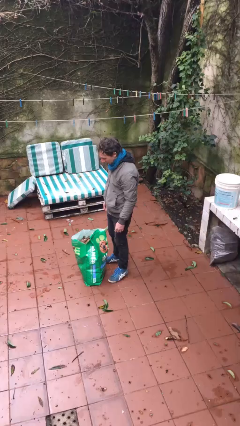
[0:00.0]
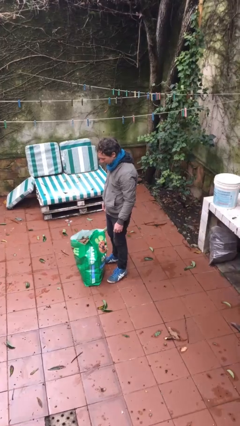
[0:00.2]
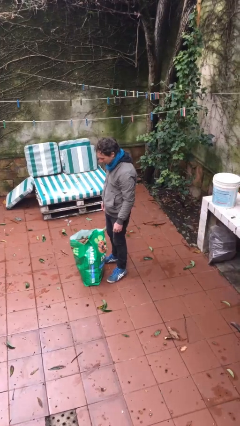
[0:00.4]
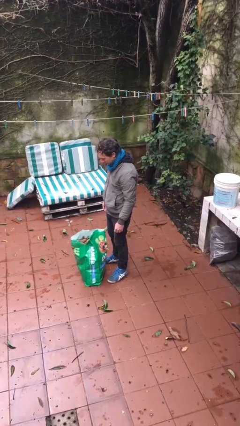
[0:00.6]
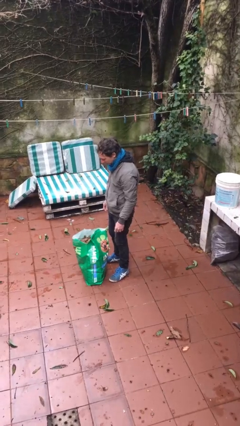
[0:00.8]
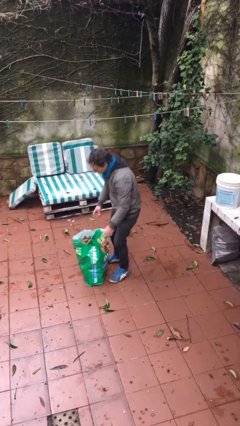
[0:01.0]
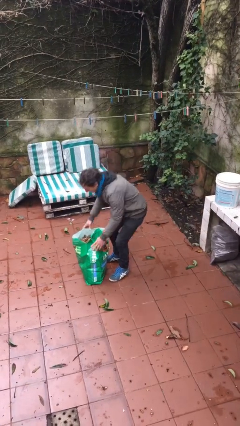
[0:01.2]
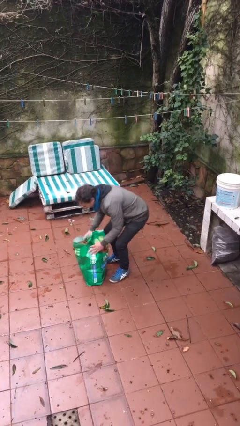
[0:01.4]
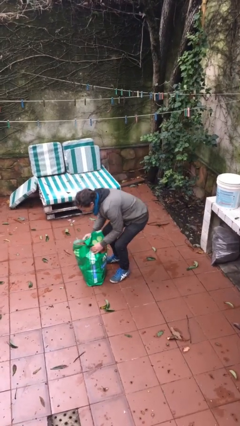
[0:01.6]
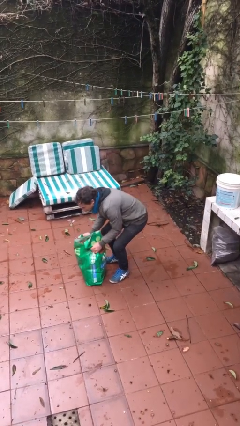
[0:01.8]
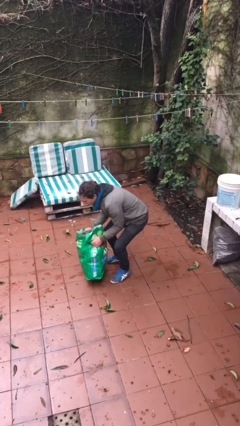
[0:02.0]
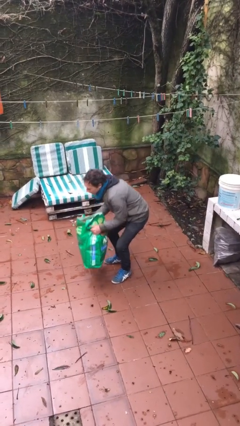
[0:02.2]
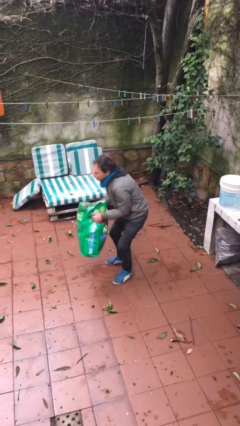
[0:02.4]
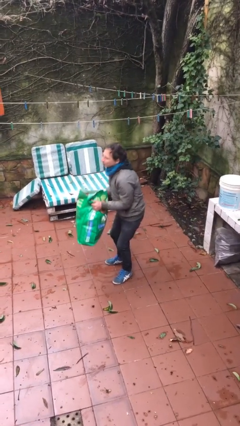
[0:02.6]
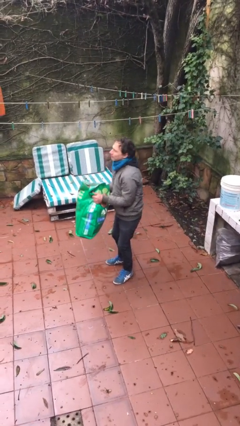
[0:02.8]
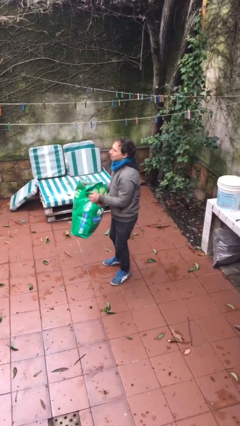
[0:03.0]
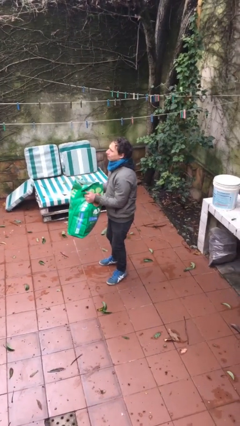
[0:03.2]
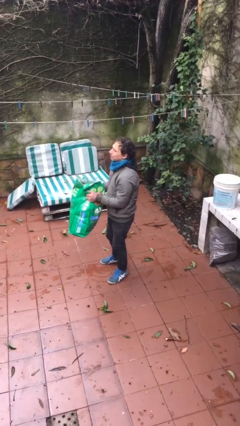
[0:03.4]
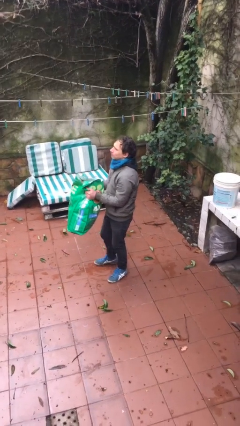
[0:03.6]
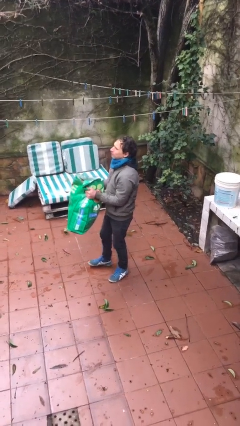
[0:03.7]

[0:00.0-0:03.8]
person picks up object from floor

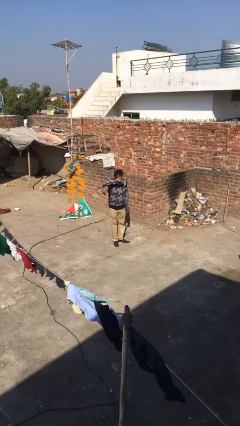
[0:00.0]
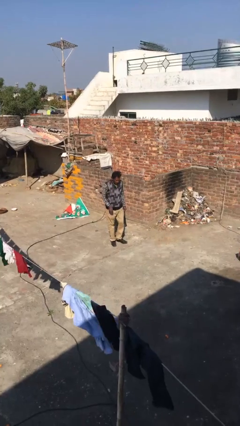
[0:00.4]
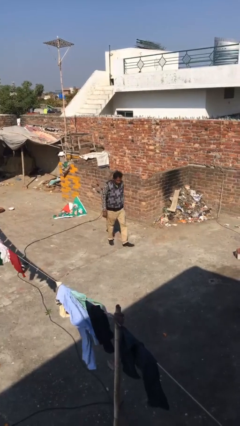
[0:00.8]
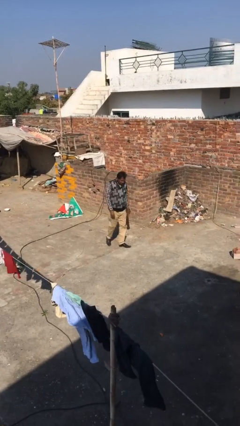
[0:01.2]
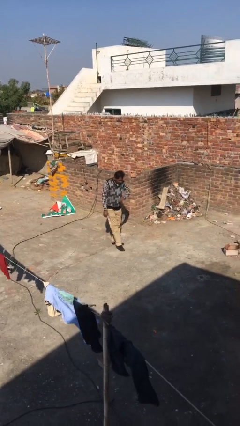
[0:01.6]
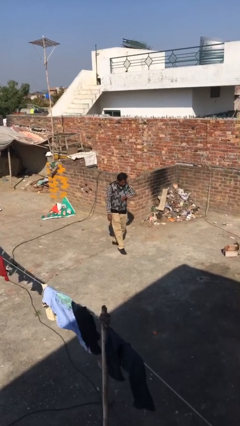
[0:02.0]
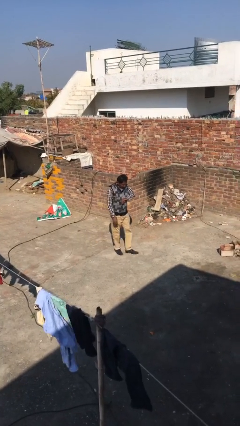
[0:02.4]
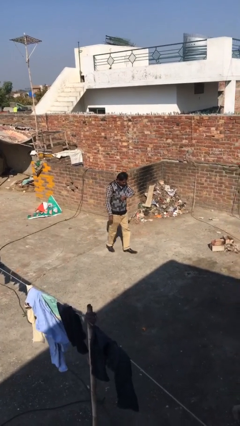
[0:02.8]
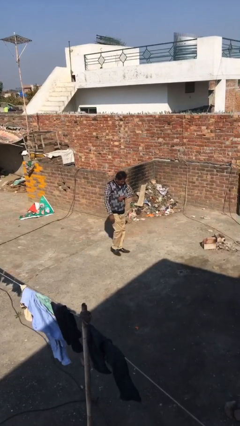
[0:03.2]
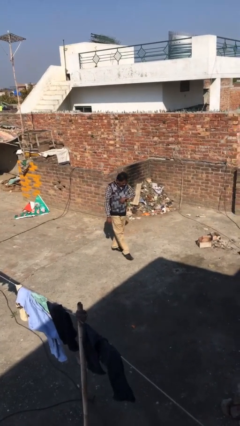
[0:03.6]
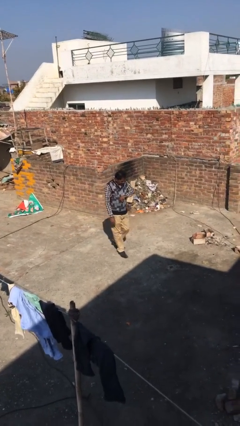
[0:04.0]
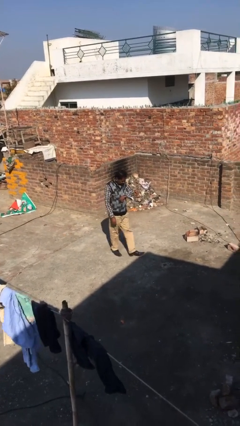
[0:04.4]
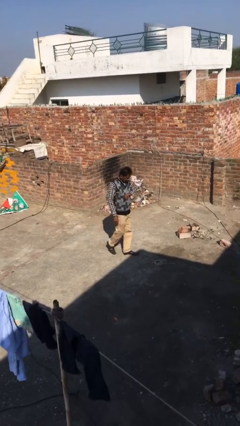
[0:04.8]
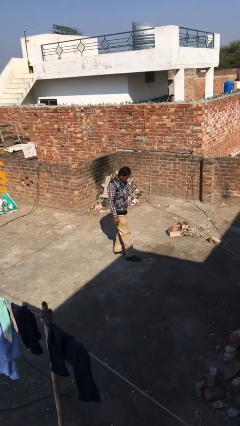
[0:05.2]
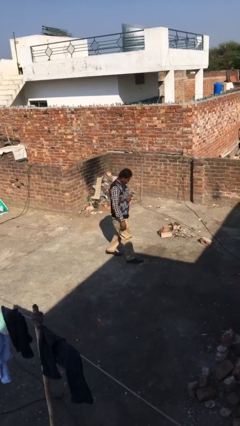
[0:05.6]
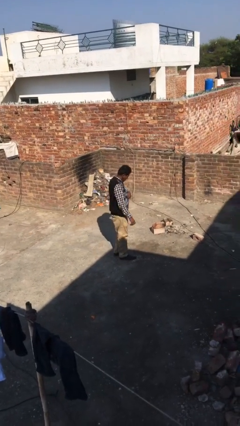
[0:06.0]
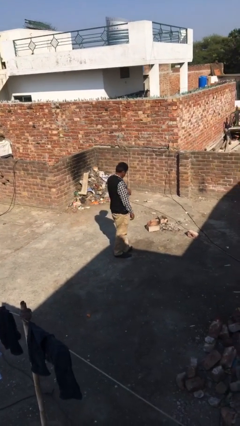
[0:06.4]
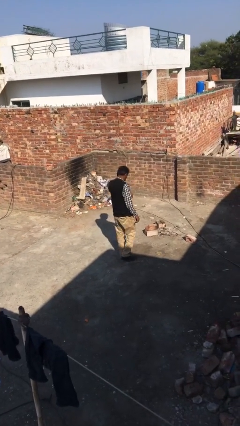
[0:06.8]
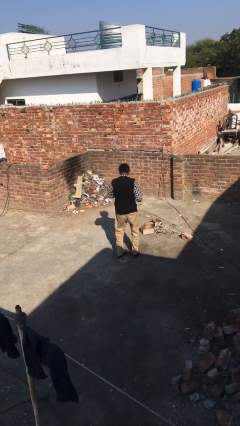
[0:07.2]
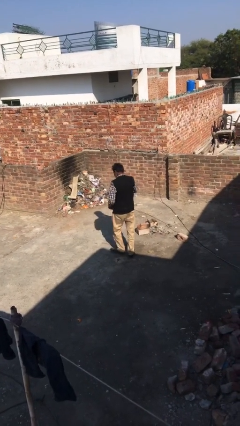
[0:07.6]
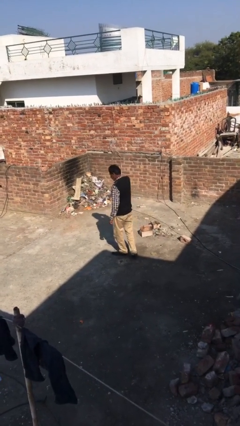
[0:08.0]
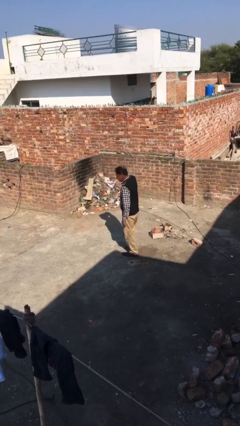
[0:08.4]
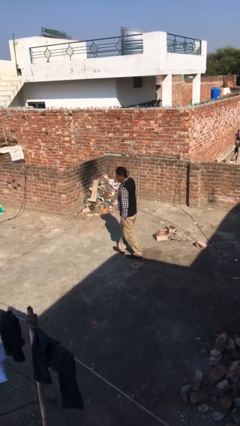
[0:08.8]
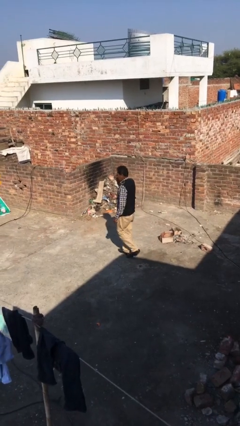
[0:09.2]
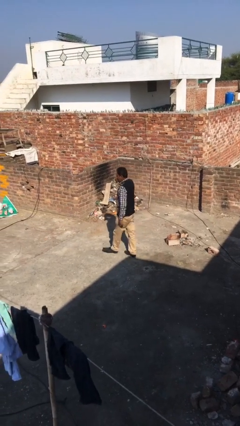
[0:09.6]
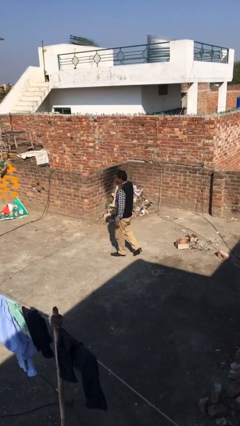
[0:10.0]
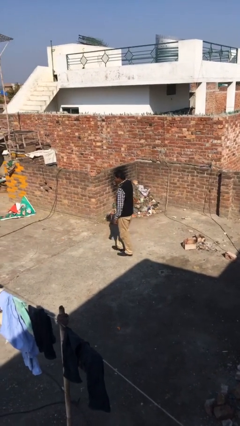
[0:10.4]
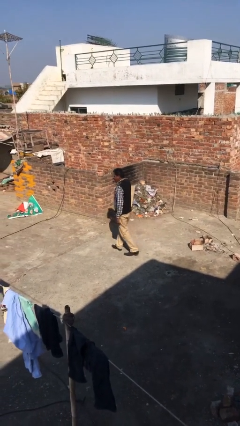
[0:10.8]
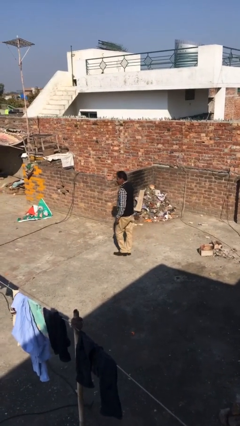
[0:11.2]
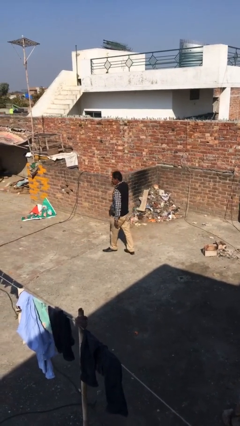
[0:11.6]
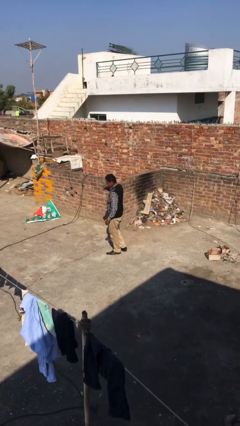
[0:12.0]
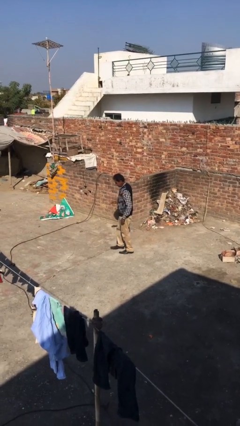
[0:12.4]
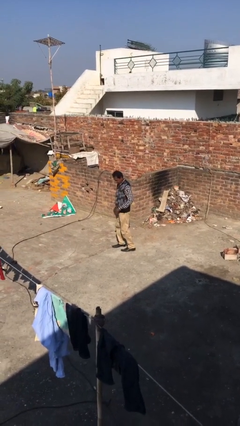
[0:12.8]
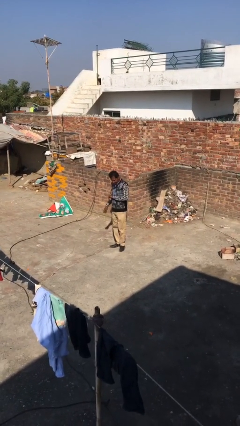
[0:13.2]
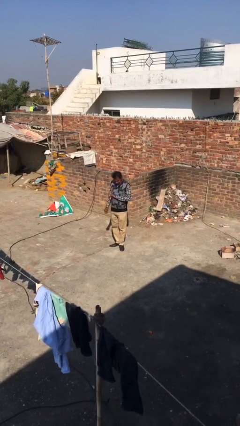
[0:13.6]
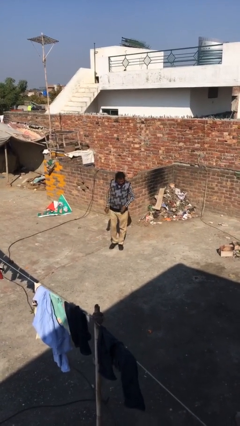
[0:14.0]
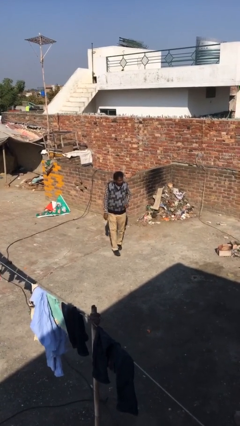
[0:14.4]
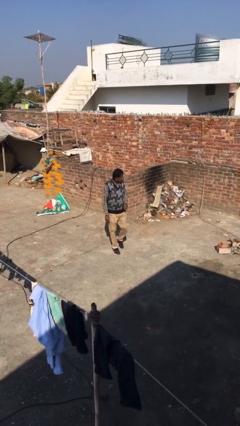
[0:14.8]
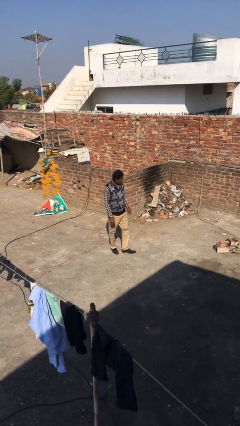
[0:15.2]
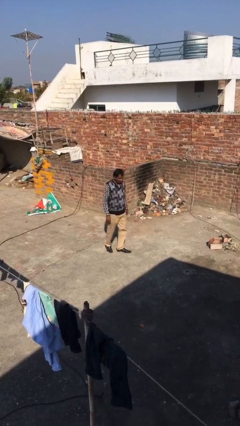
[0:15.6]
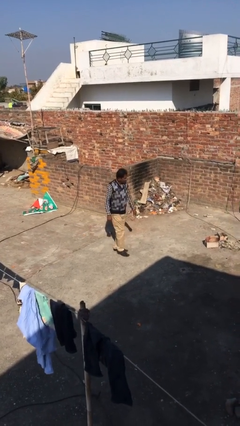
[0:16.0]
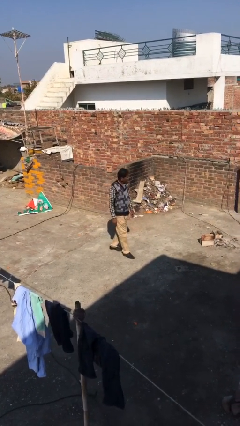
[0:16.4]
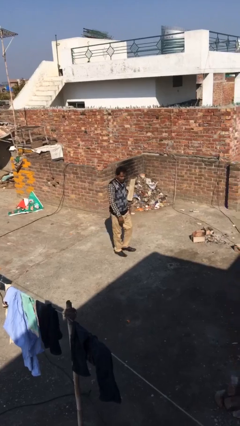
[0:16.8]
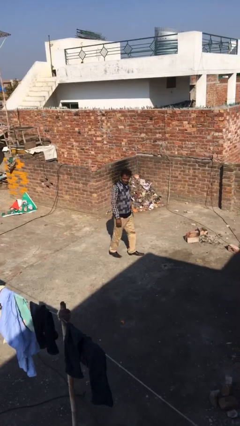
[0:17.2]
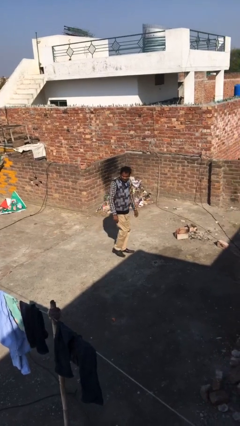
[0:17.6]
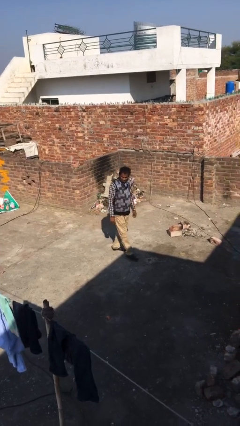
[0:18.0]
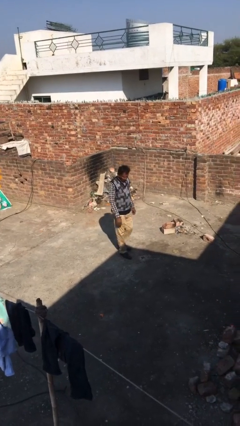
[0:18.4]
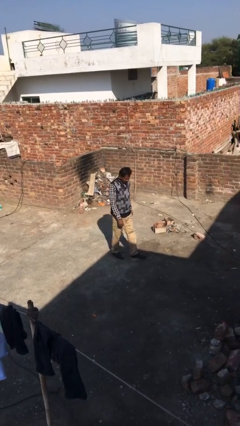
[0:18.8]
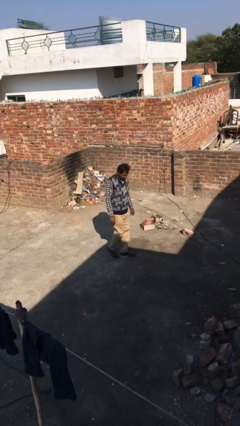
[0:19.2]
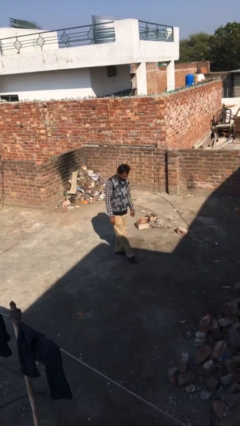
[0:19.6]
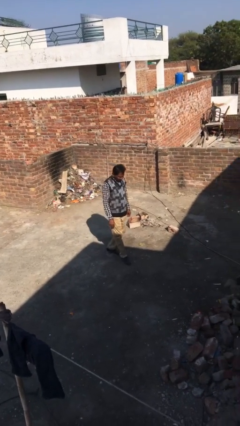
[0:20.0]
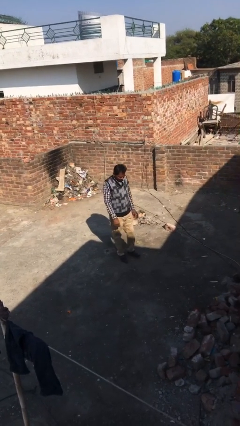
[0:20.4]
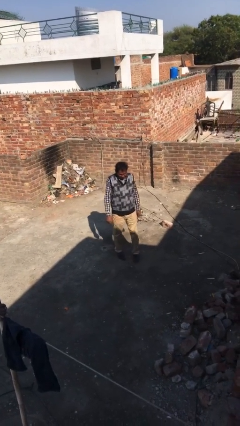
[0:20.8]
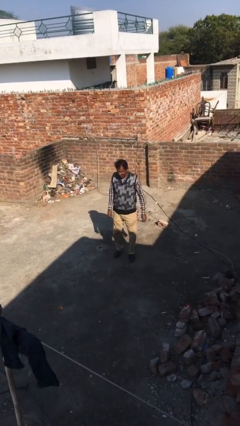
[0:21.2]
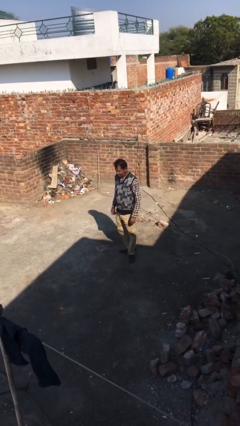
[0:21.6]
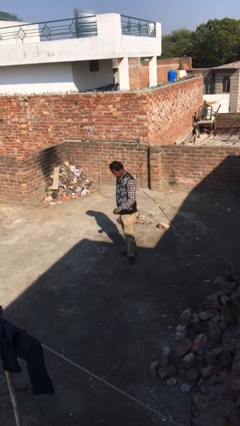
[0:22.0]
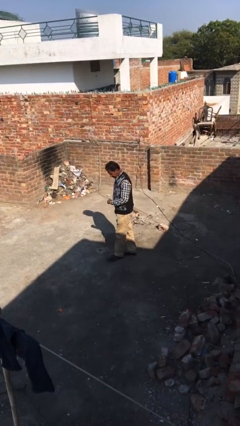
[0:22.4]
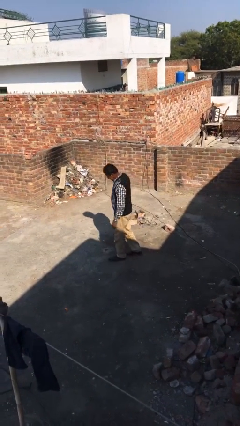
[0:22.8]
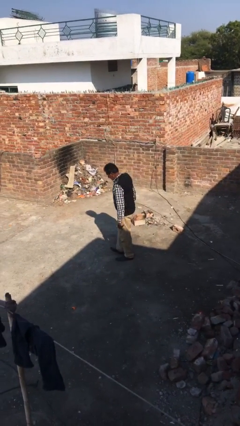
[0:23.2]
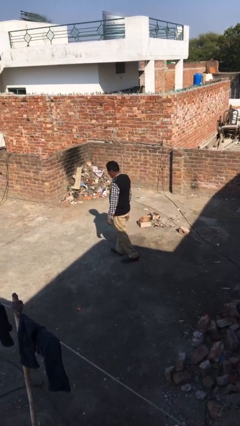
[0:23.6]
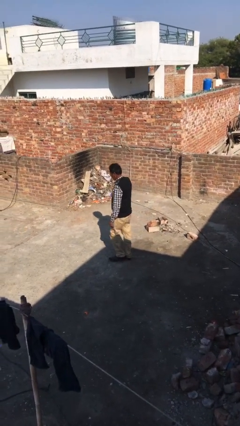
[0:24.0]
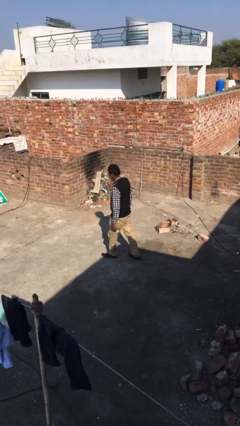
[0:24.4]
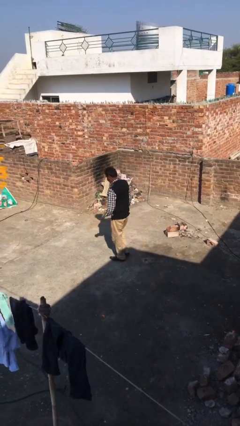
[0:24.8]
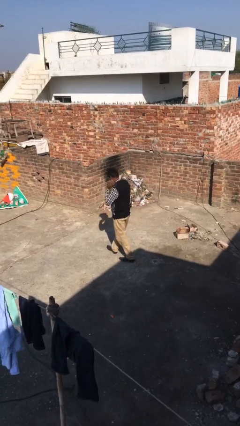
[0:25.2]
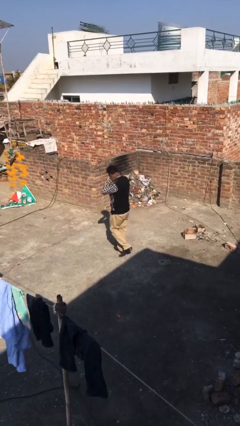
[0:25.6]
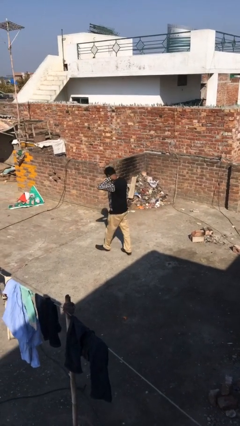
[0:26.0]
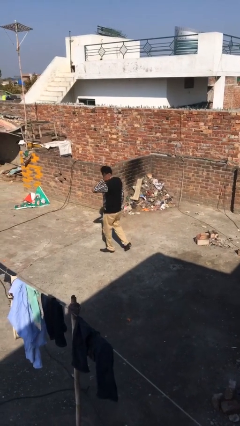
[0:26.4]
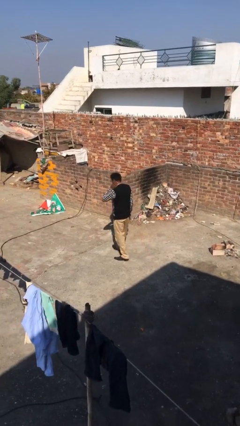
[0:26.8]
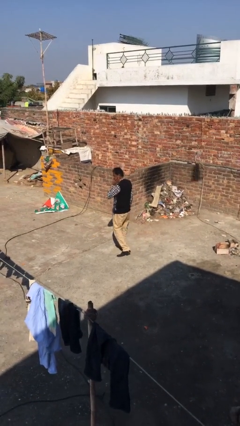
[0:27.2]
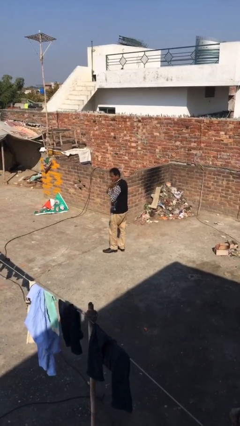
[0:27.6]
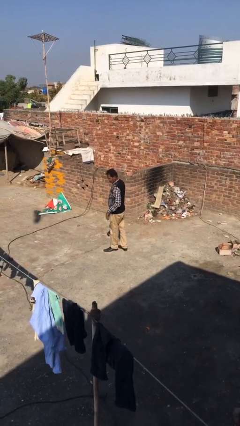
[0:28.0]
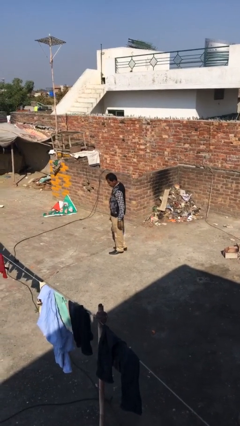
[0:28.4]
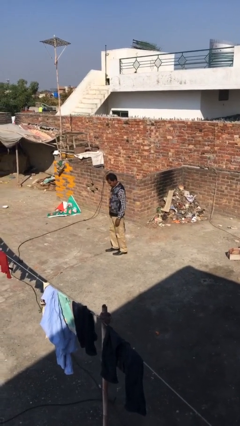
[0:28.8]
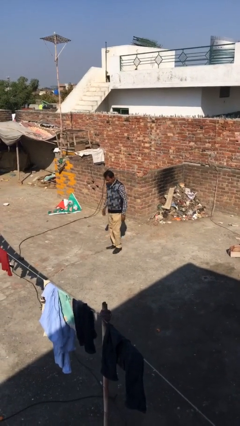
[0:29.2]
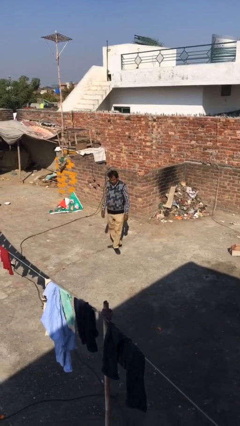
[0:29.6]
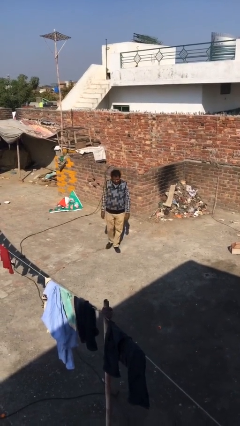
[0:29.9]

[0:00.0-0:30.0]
person walks
